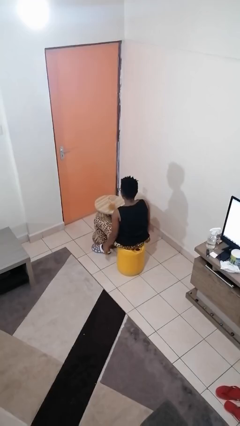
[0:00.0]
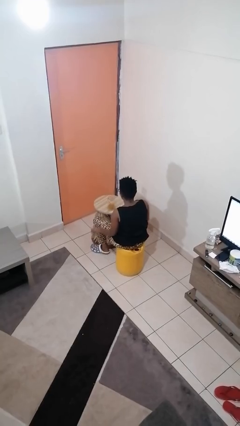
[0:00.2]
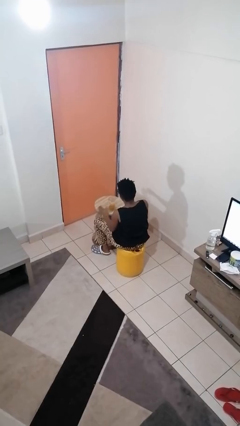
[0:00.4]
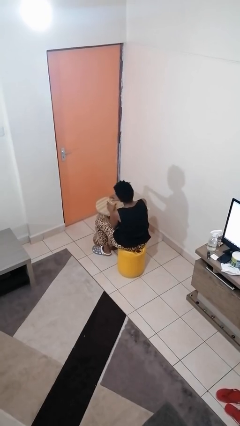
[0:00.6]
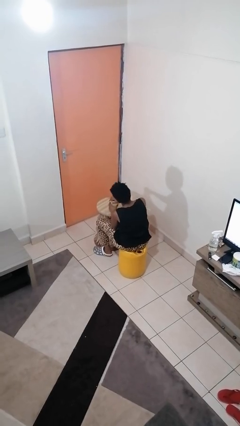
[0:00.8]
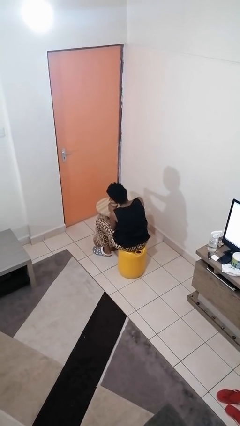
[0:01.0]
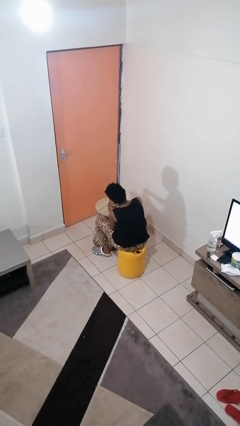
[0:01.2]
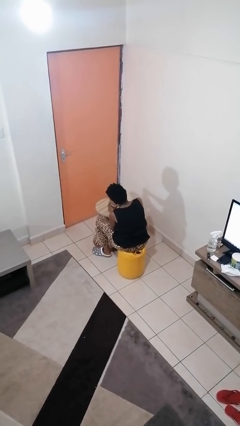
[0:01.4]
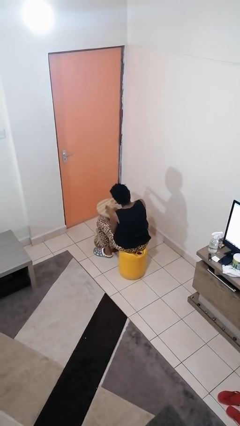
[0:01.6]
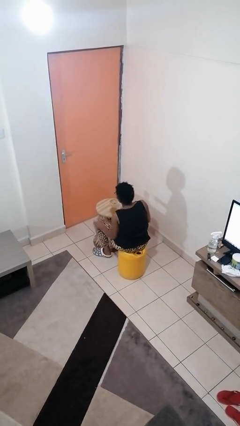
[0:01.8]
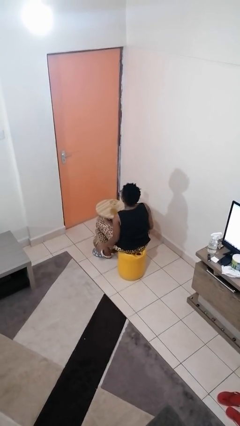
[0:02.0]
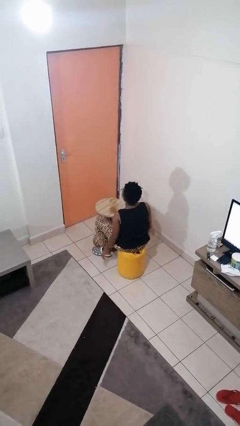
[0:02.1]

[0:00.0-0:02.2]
person closes jar

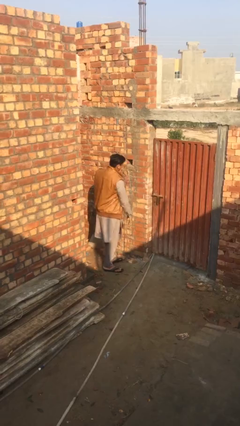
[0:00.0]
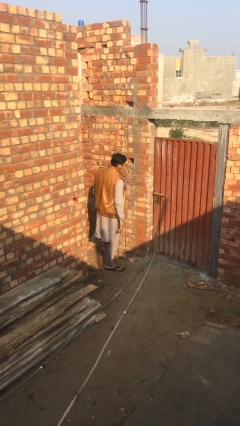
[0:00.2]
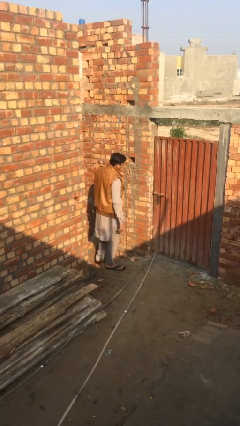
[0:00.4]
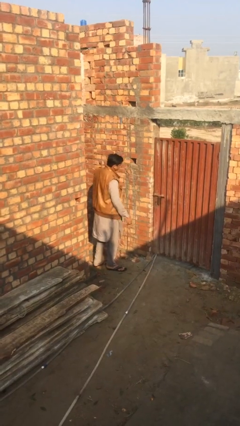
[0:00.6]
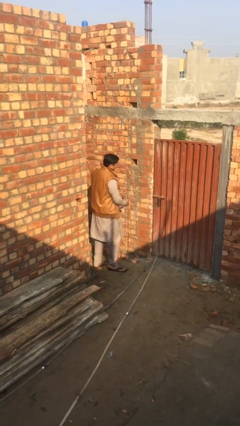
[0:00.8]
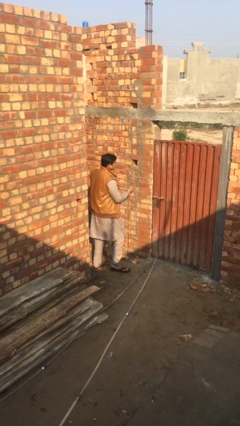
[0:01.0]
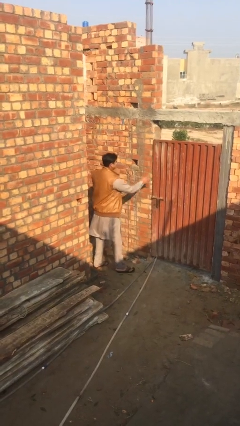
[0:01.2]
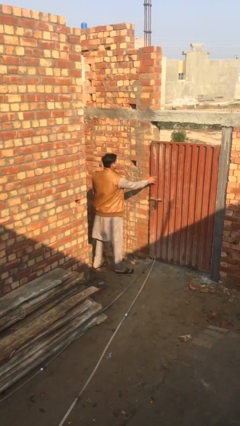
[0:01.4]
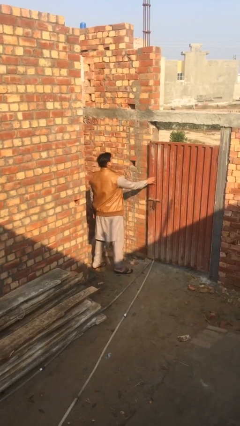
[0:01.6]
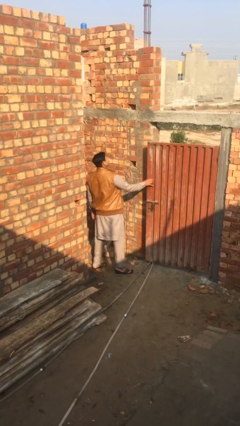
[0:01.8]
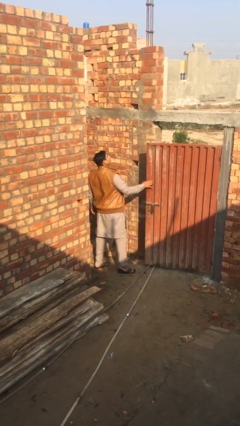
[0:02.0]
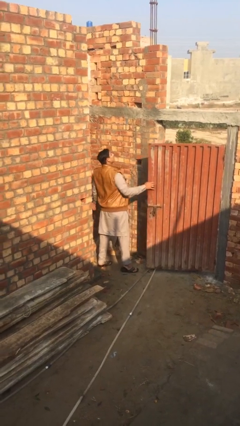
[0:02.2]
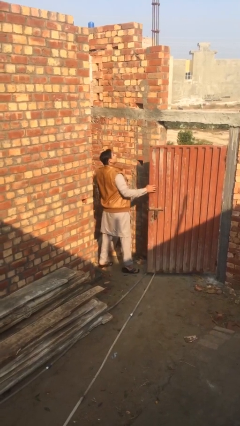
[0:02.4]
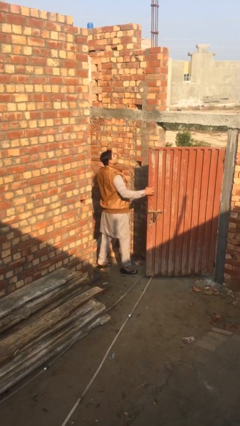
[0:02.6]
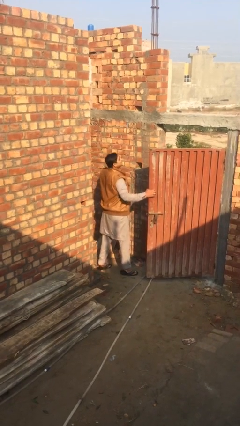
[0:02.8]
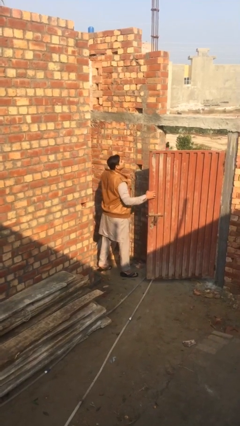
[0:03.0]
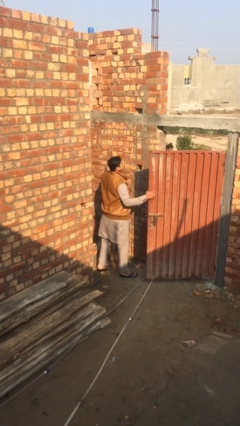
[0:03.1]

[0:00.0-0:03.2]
person opens facility door

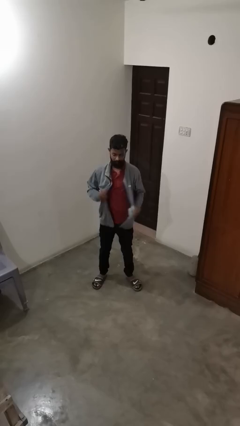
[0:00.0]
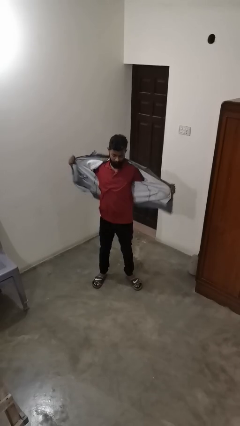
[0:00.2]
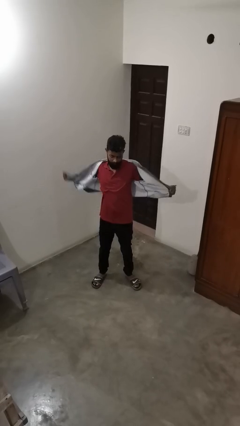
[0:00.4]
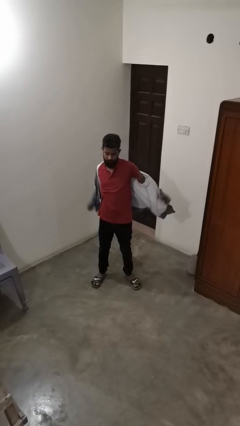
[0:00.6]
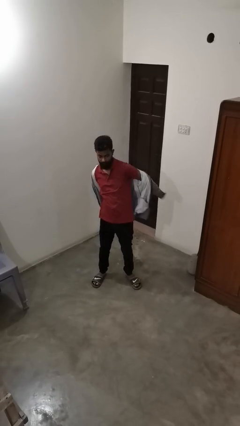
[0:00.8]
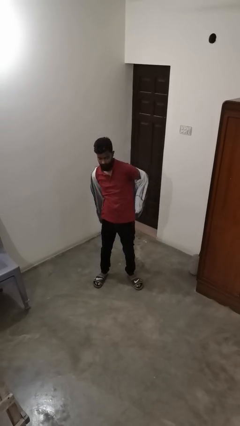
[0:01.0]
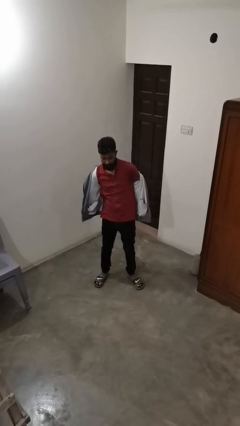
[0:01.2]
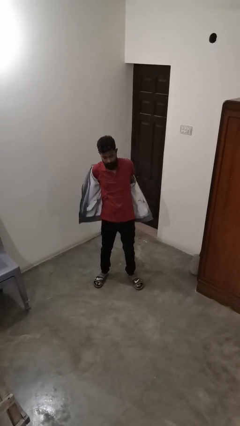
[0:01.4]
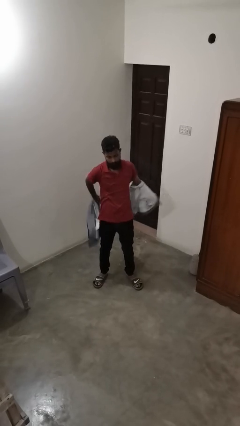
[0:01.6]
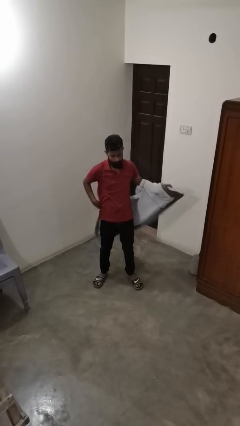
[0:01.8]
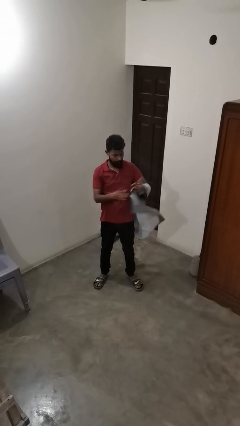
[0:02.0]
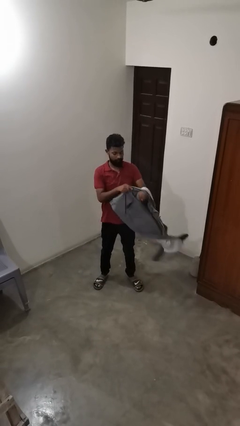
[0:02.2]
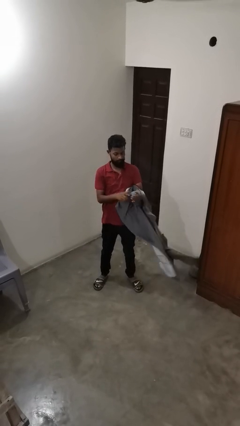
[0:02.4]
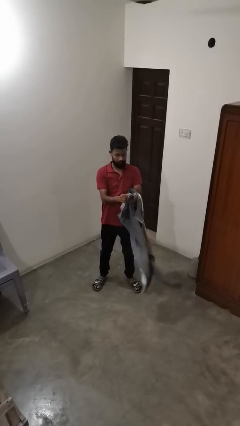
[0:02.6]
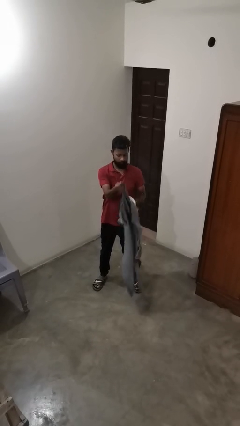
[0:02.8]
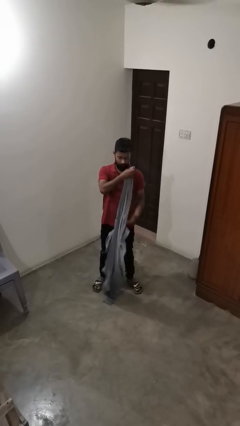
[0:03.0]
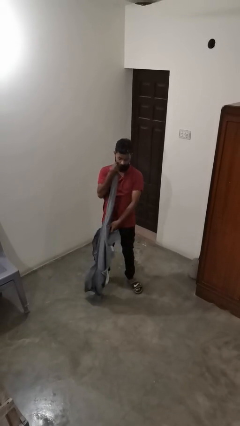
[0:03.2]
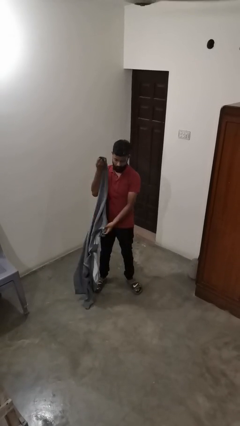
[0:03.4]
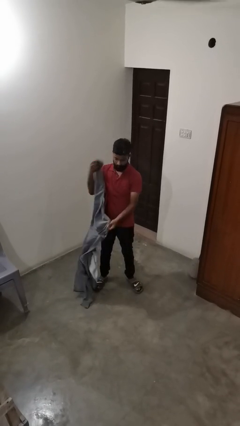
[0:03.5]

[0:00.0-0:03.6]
person takes off jacket

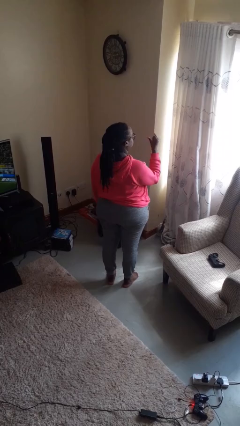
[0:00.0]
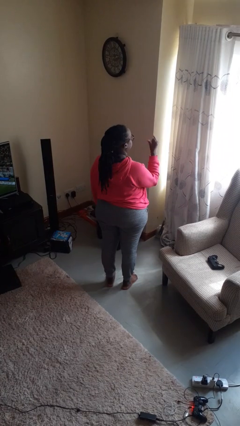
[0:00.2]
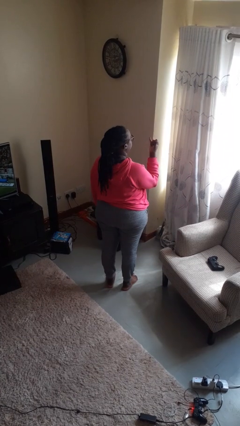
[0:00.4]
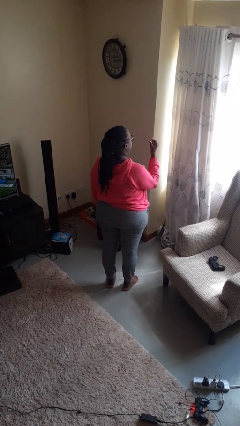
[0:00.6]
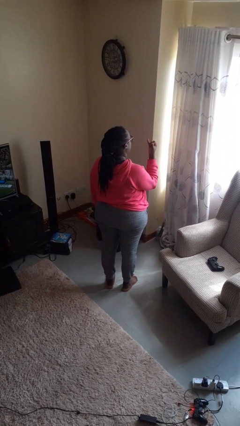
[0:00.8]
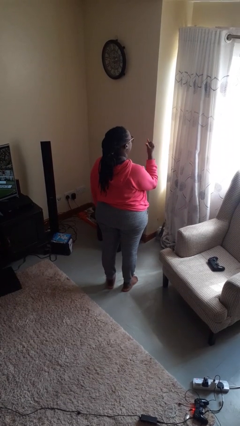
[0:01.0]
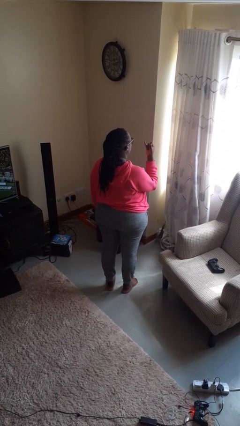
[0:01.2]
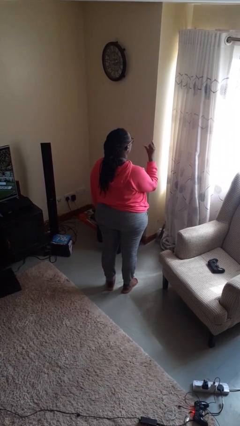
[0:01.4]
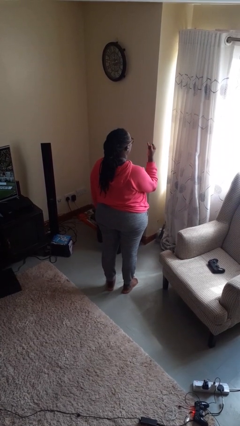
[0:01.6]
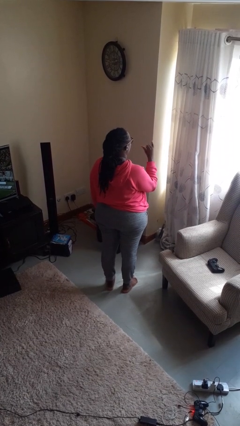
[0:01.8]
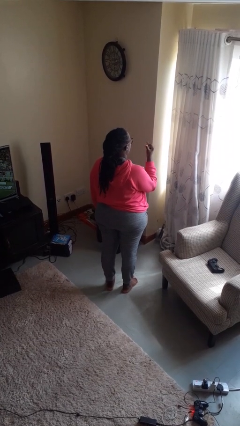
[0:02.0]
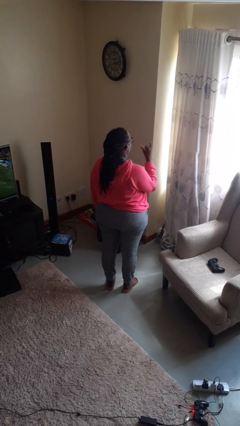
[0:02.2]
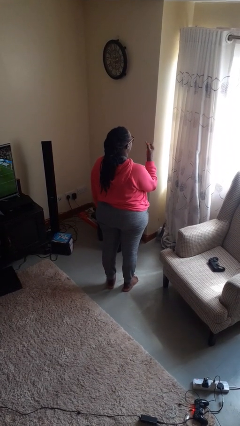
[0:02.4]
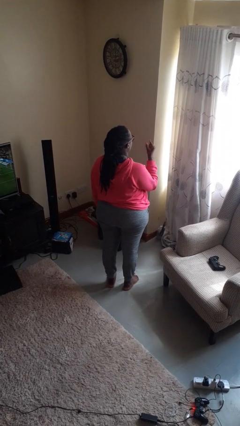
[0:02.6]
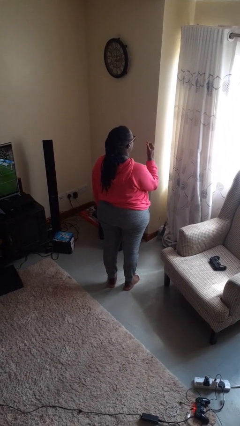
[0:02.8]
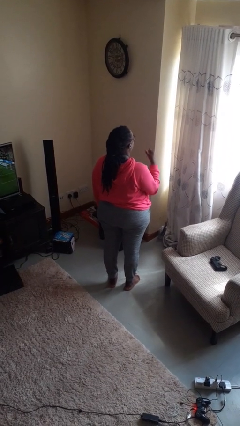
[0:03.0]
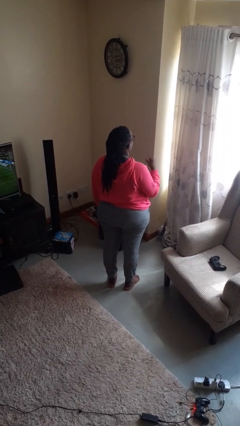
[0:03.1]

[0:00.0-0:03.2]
person gestures hang loose

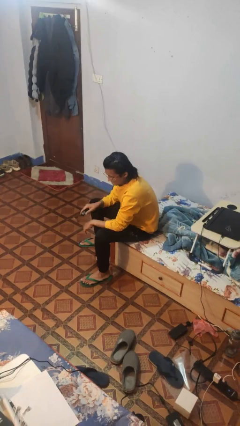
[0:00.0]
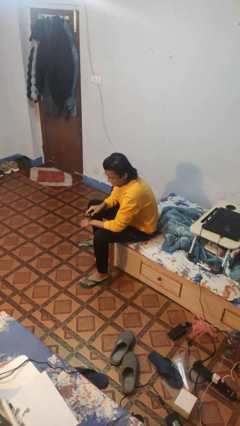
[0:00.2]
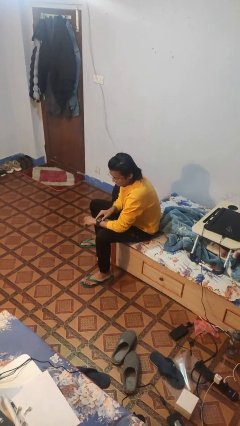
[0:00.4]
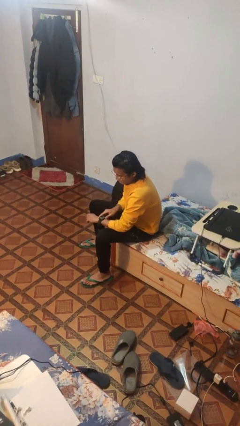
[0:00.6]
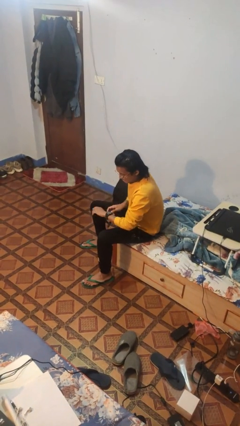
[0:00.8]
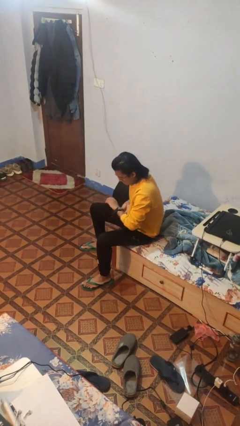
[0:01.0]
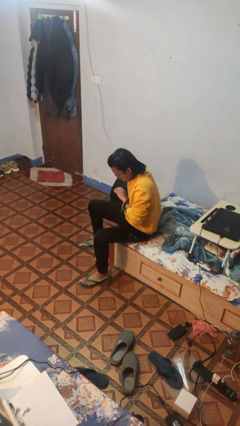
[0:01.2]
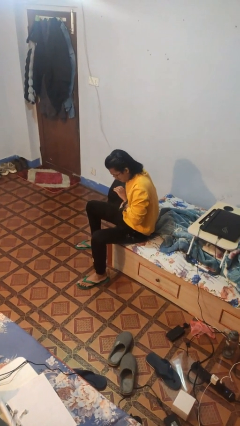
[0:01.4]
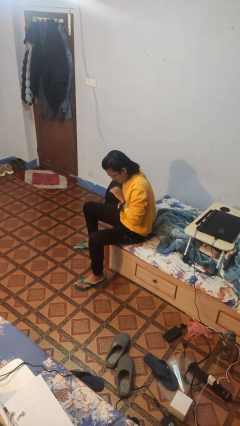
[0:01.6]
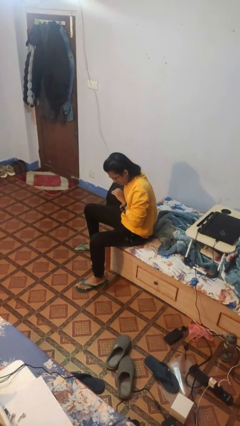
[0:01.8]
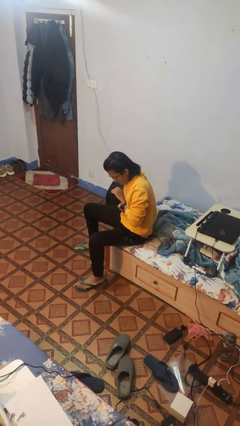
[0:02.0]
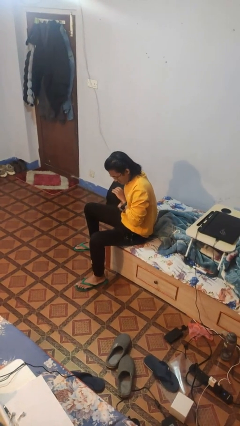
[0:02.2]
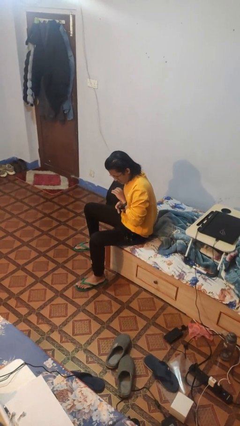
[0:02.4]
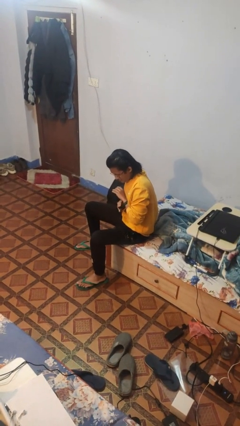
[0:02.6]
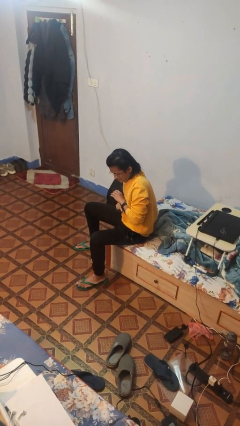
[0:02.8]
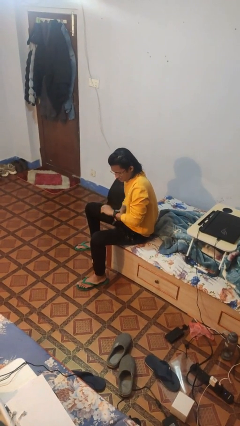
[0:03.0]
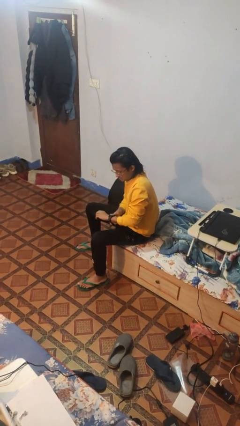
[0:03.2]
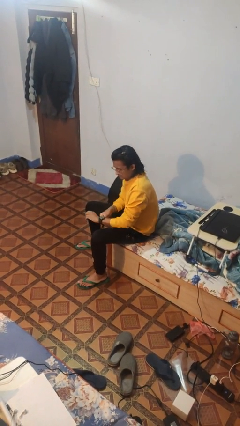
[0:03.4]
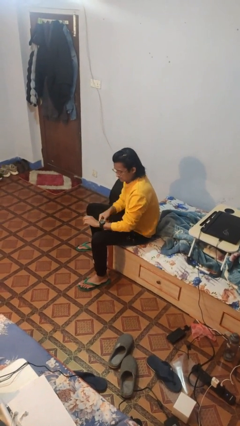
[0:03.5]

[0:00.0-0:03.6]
person puts on wristwatch

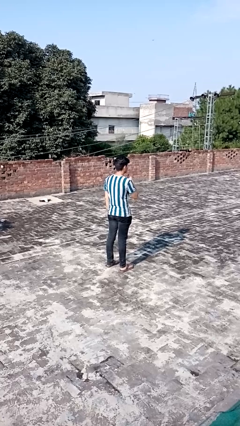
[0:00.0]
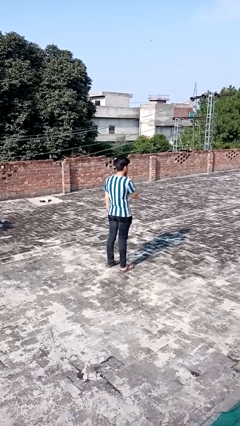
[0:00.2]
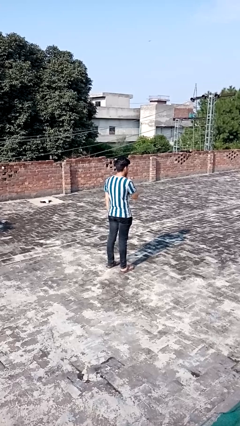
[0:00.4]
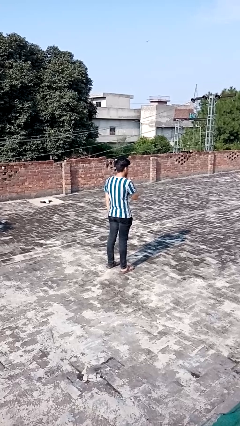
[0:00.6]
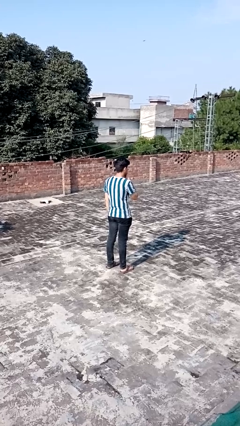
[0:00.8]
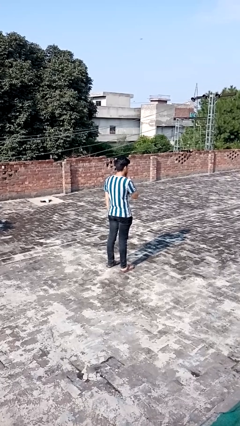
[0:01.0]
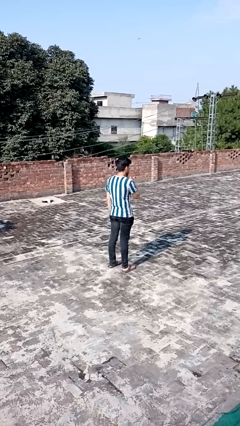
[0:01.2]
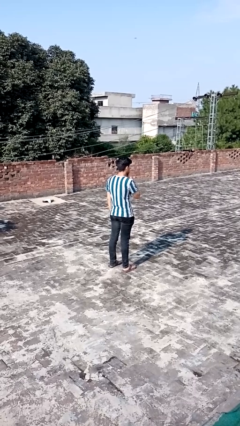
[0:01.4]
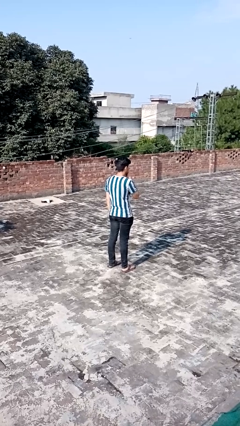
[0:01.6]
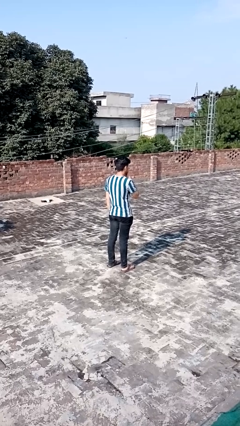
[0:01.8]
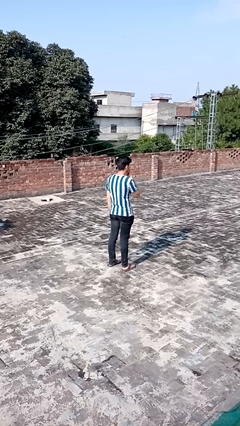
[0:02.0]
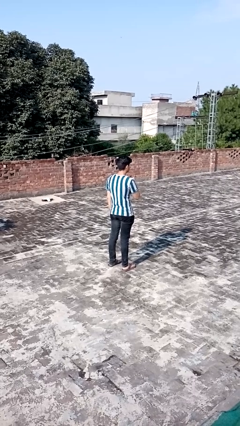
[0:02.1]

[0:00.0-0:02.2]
person gestures be quiet
